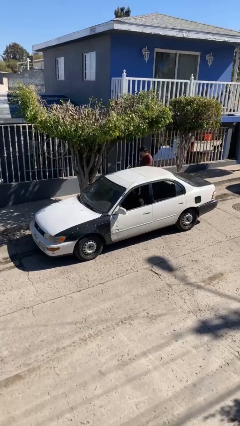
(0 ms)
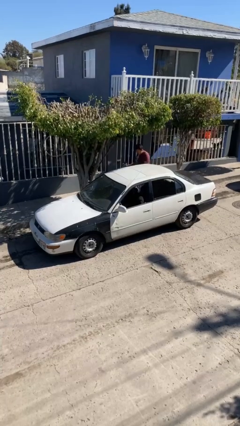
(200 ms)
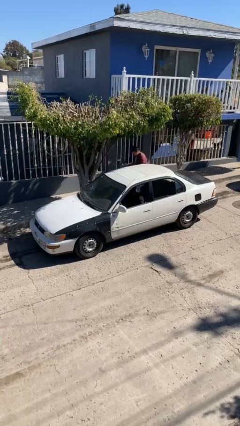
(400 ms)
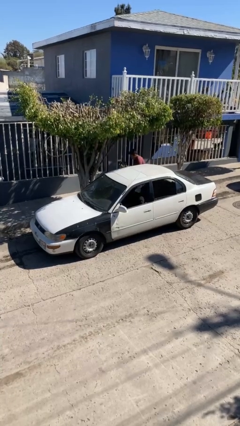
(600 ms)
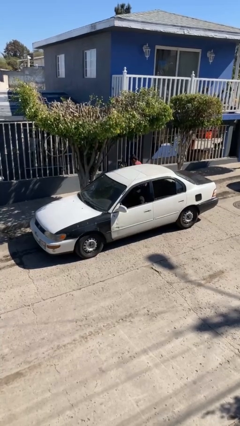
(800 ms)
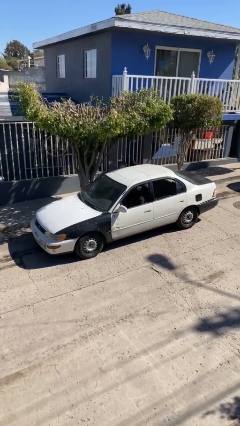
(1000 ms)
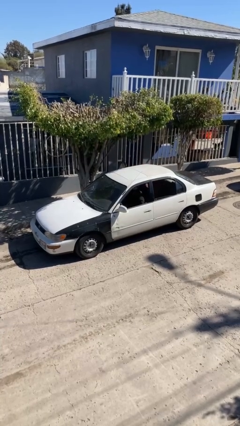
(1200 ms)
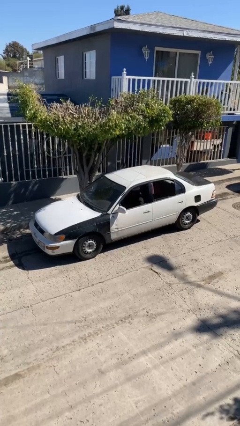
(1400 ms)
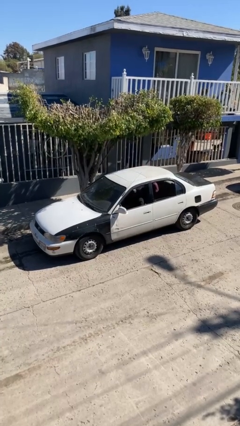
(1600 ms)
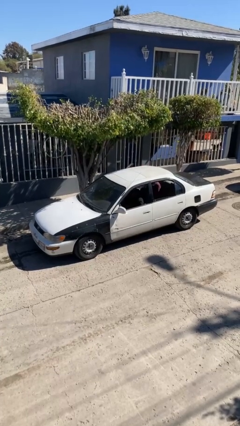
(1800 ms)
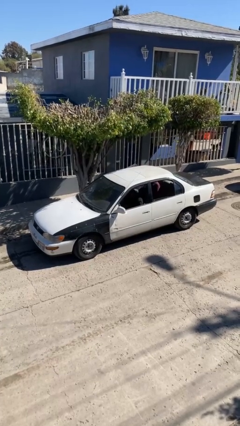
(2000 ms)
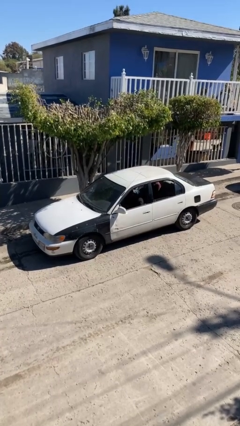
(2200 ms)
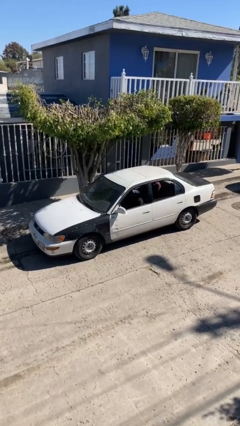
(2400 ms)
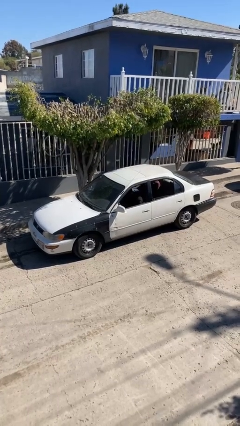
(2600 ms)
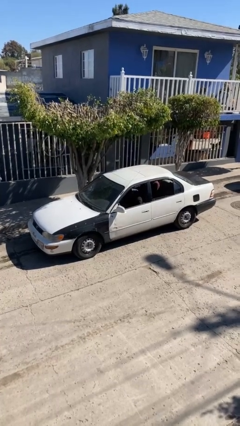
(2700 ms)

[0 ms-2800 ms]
car picks up person

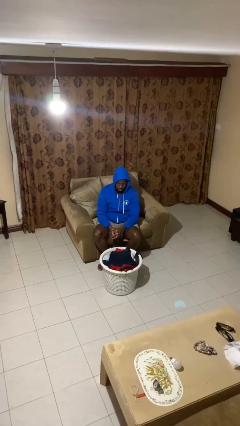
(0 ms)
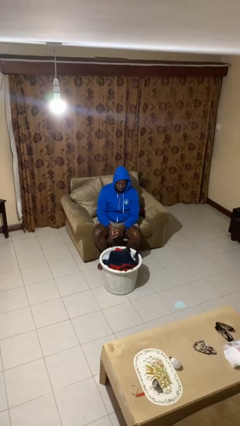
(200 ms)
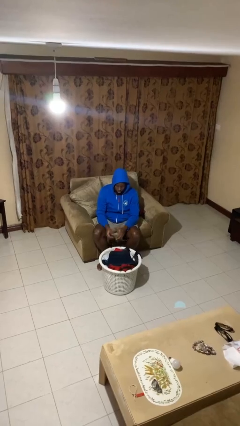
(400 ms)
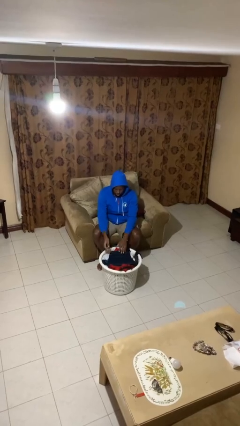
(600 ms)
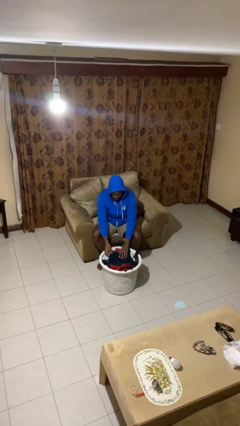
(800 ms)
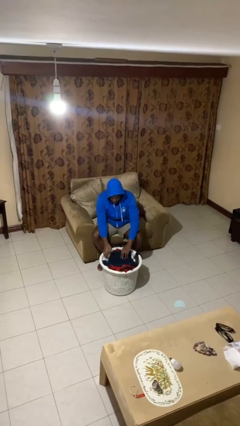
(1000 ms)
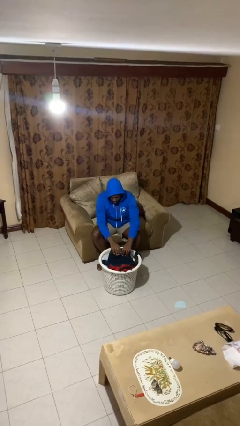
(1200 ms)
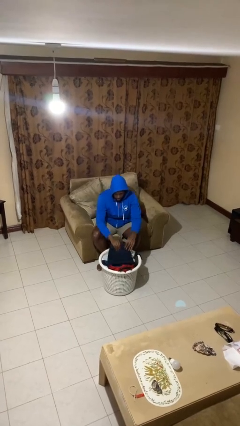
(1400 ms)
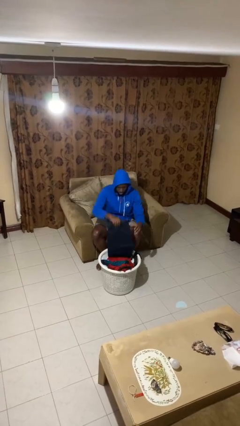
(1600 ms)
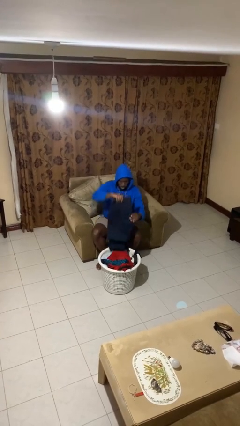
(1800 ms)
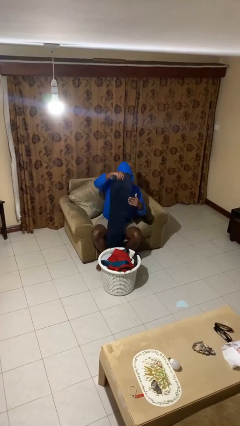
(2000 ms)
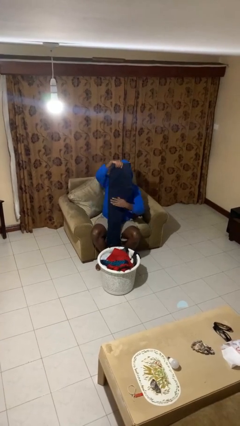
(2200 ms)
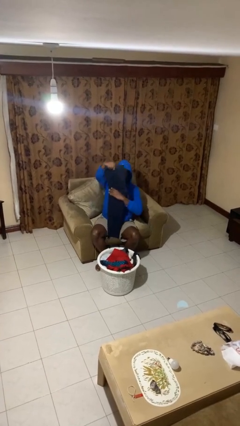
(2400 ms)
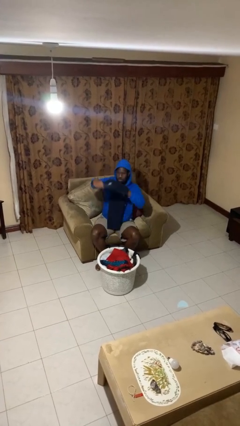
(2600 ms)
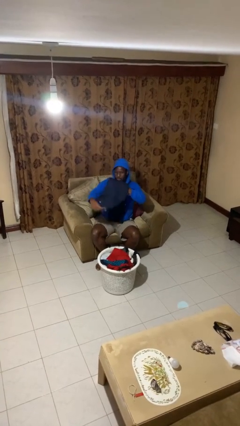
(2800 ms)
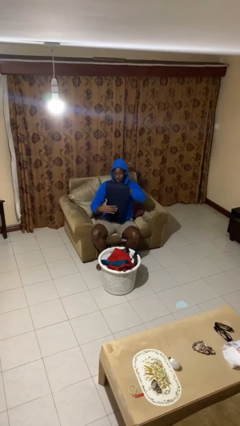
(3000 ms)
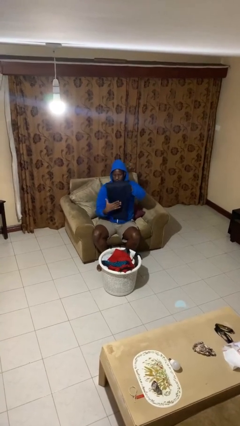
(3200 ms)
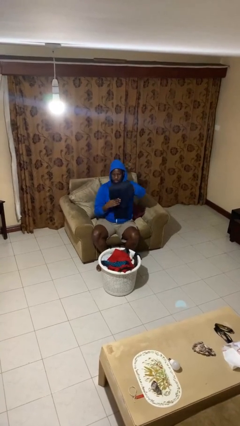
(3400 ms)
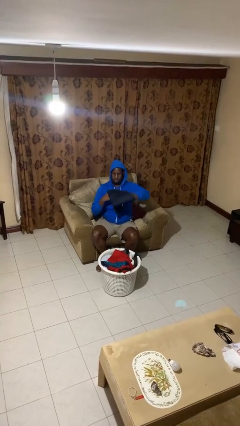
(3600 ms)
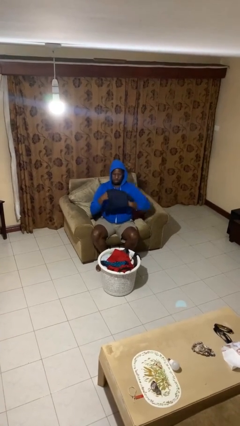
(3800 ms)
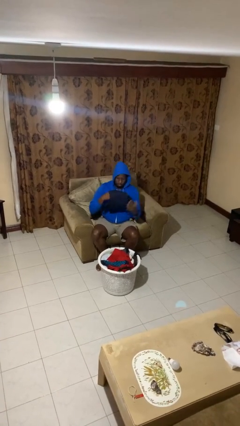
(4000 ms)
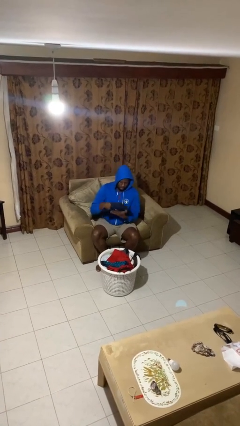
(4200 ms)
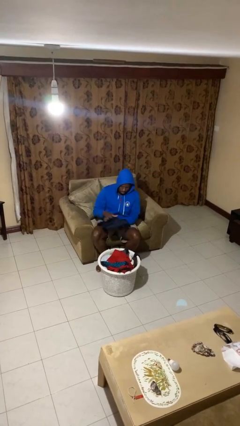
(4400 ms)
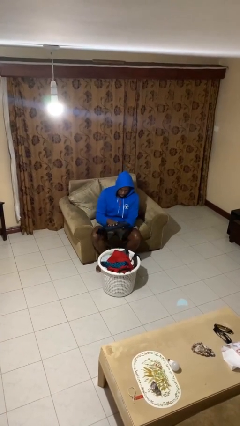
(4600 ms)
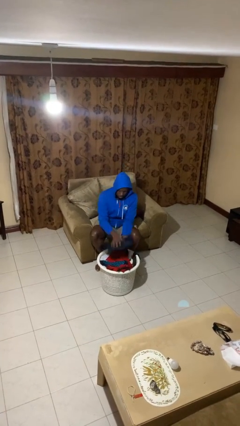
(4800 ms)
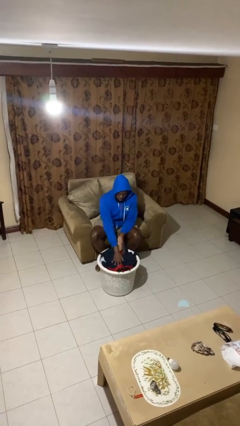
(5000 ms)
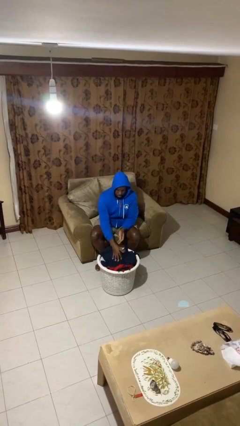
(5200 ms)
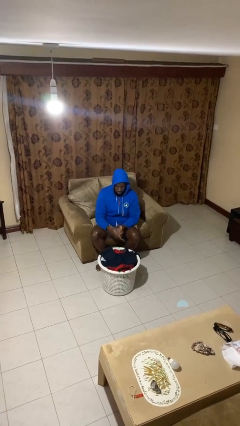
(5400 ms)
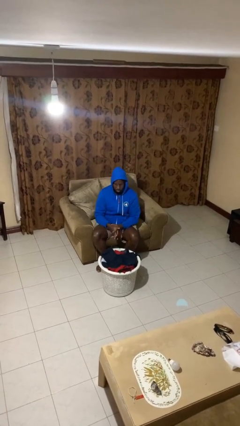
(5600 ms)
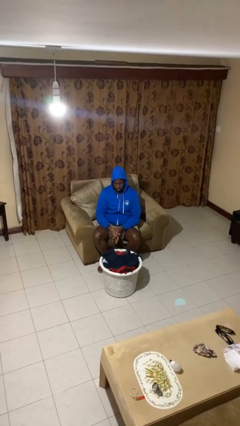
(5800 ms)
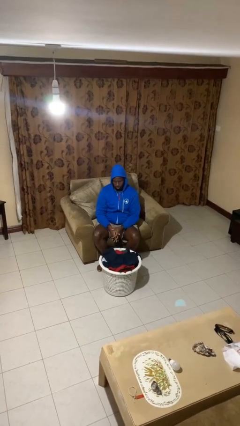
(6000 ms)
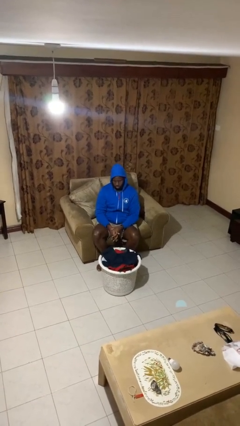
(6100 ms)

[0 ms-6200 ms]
person folds pants

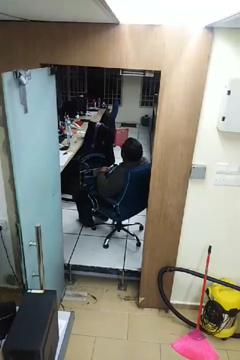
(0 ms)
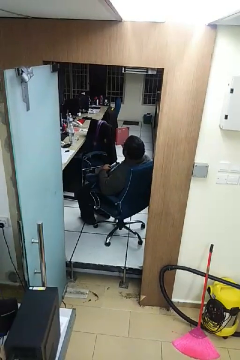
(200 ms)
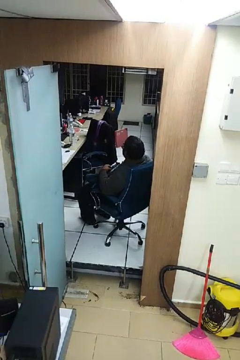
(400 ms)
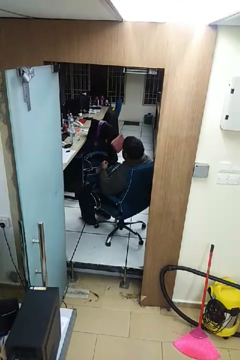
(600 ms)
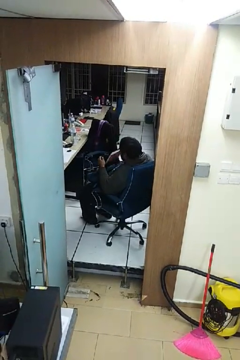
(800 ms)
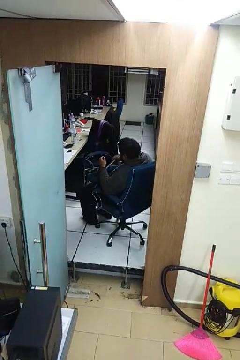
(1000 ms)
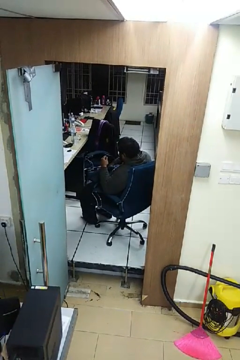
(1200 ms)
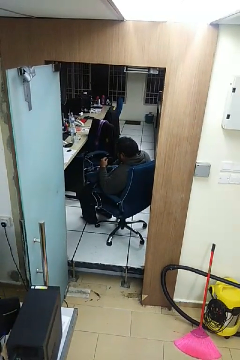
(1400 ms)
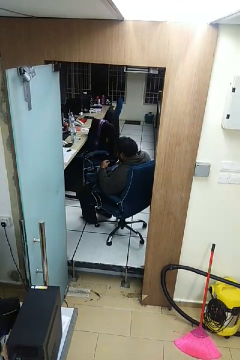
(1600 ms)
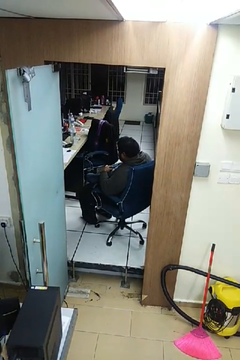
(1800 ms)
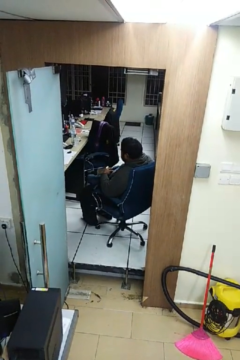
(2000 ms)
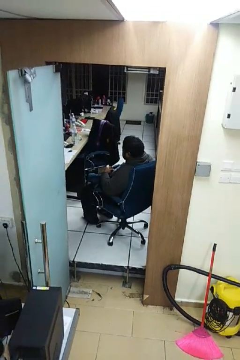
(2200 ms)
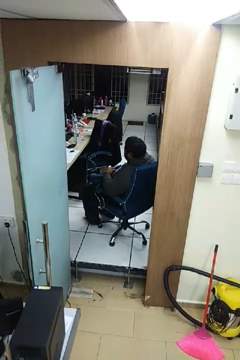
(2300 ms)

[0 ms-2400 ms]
person puts object into backpack

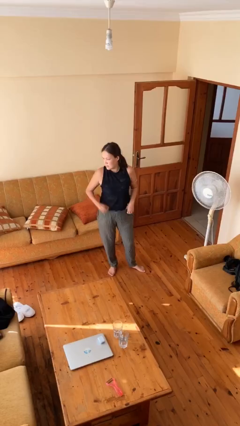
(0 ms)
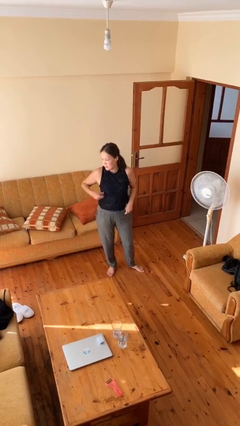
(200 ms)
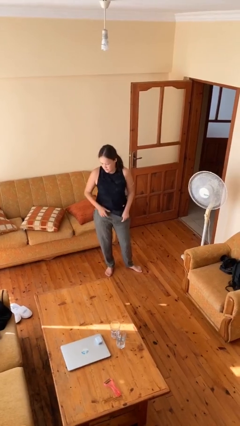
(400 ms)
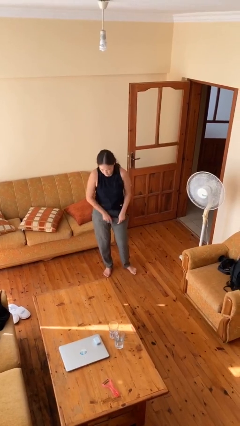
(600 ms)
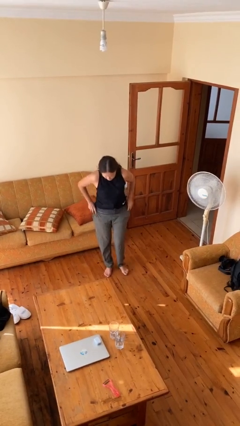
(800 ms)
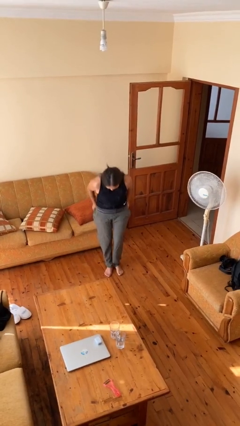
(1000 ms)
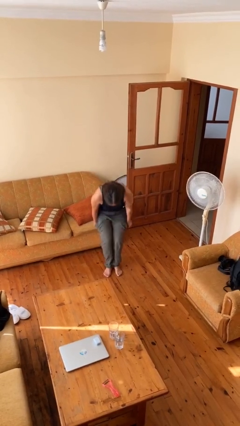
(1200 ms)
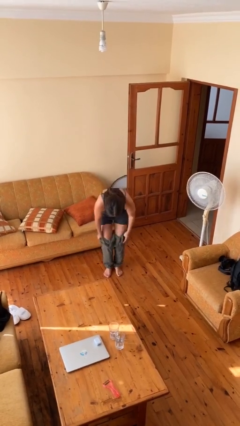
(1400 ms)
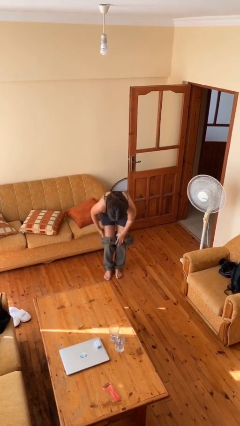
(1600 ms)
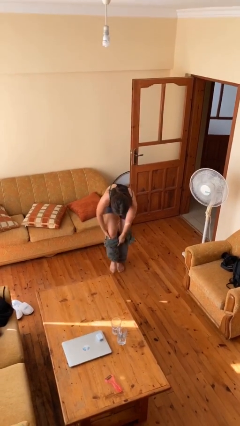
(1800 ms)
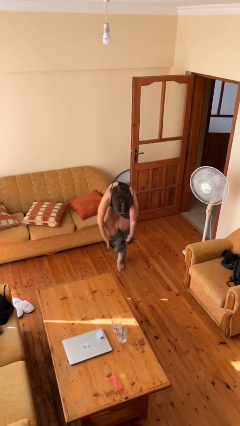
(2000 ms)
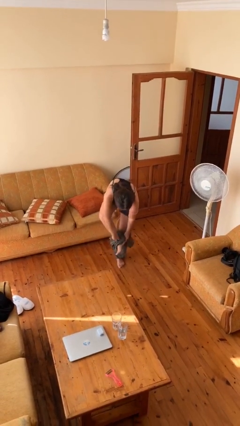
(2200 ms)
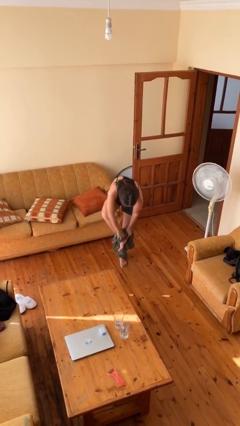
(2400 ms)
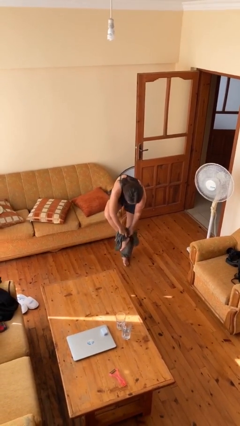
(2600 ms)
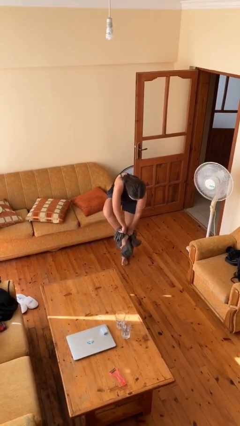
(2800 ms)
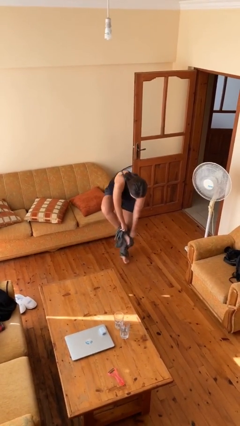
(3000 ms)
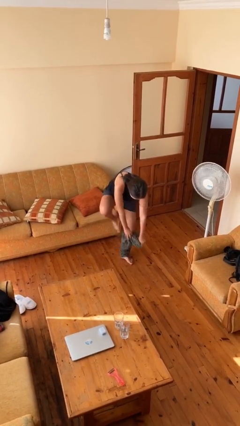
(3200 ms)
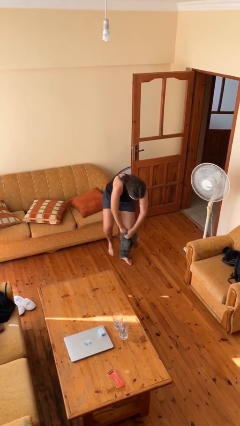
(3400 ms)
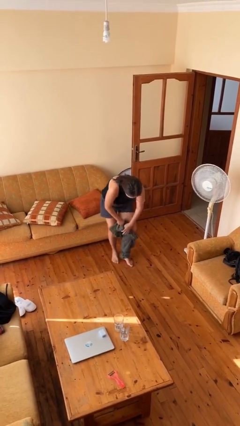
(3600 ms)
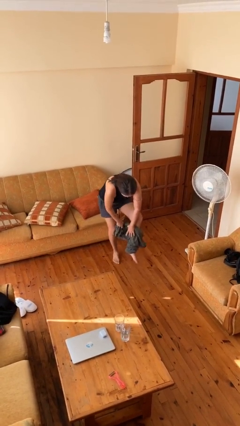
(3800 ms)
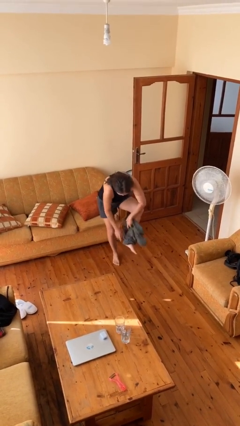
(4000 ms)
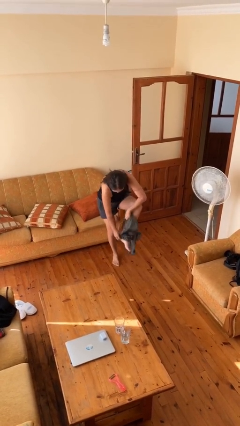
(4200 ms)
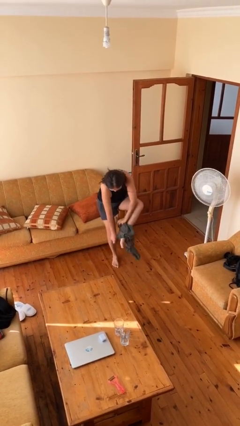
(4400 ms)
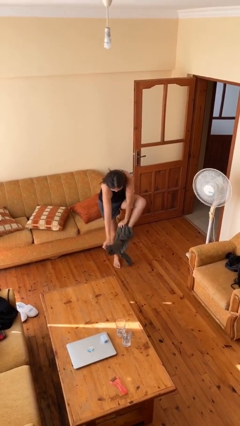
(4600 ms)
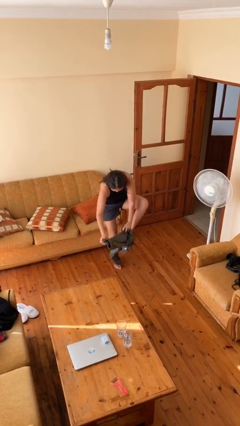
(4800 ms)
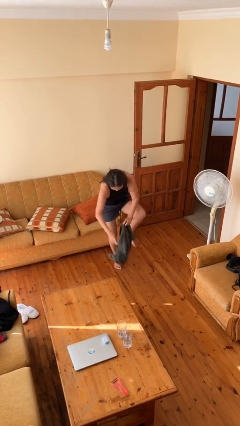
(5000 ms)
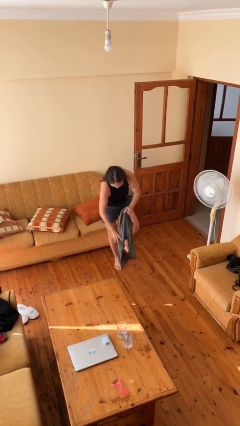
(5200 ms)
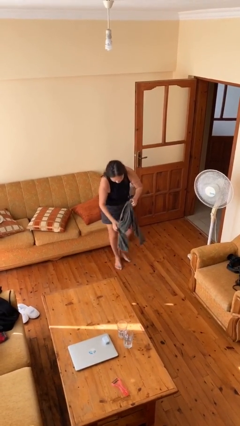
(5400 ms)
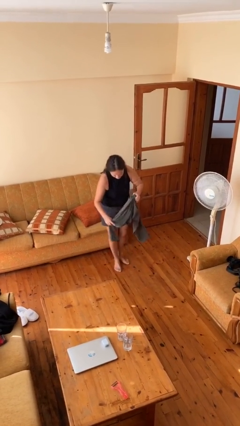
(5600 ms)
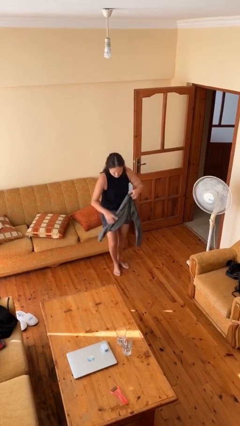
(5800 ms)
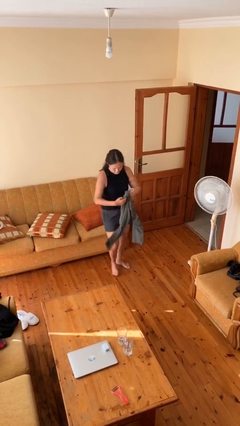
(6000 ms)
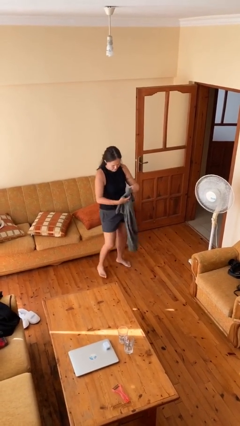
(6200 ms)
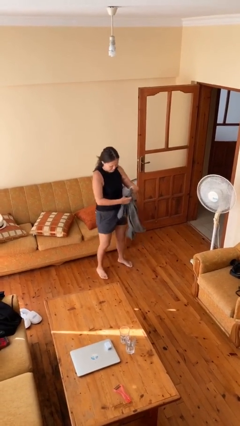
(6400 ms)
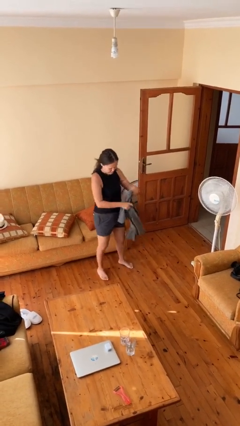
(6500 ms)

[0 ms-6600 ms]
person takes off pants

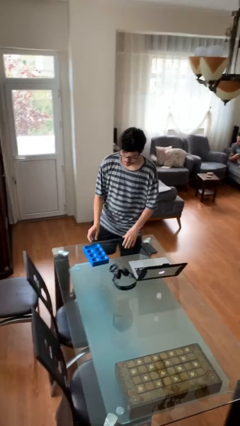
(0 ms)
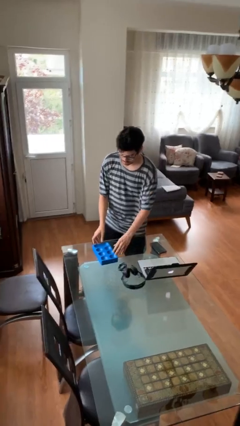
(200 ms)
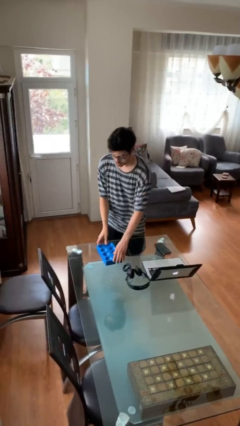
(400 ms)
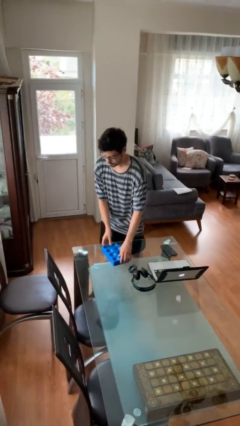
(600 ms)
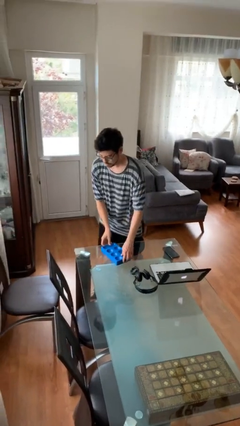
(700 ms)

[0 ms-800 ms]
person picks up object from table
